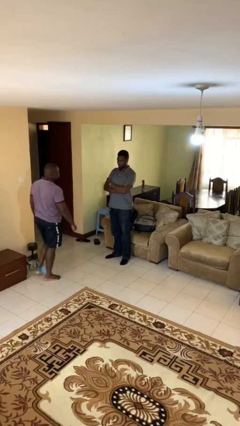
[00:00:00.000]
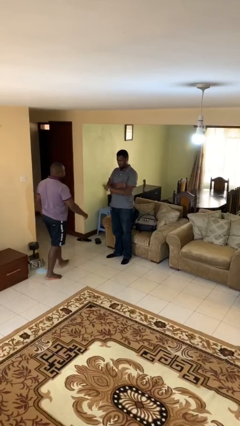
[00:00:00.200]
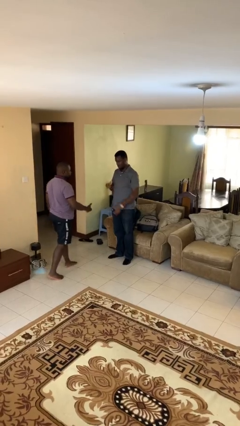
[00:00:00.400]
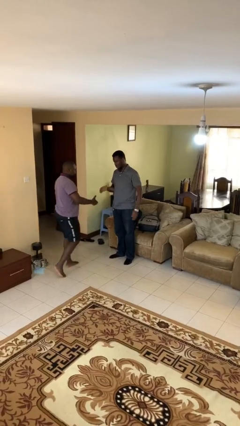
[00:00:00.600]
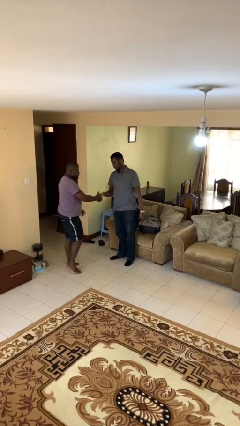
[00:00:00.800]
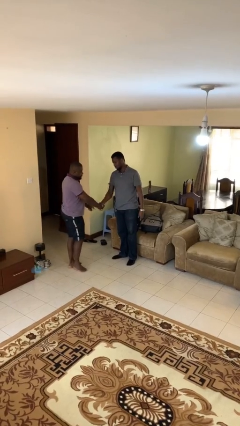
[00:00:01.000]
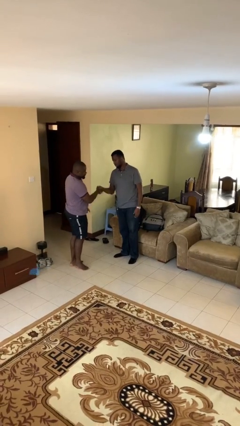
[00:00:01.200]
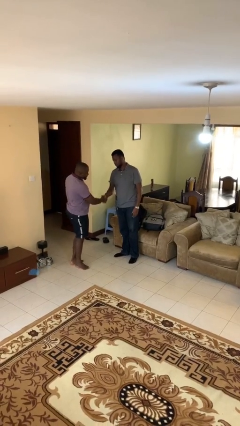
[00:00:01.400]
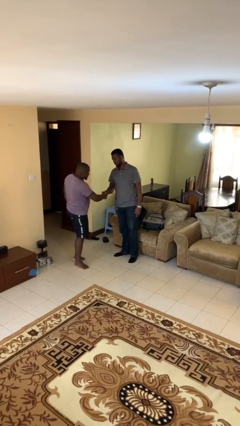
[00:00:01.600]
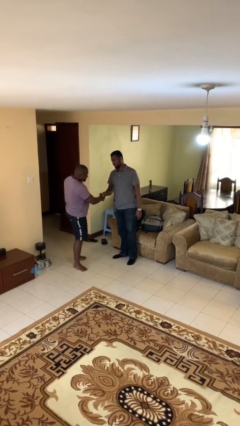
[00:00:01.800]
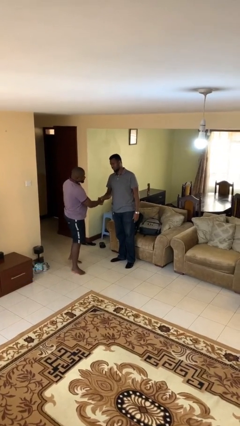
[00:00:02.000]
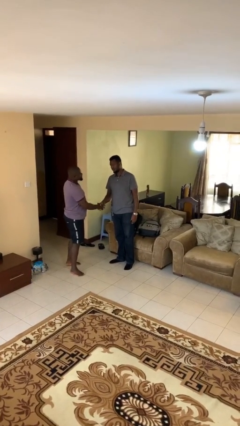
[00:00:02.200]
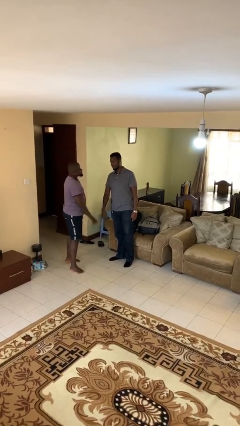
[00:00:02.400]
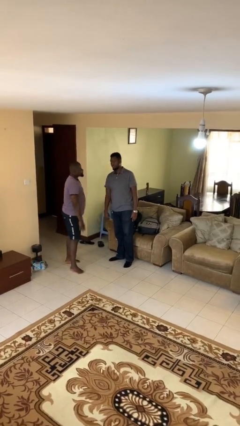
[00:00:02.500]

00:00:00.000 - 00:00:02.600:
person shakes hand

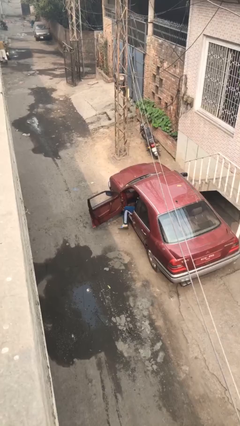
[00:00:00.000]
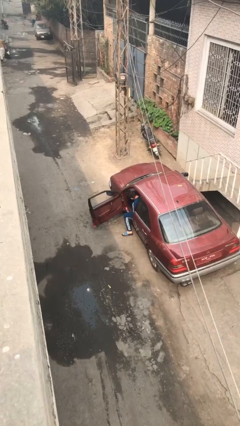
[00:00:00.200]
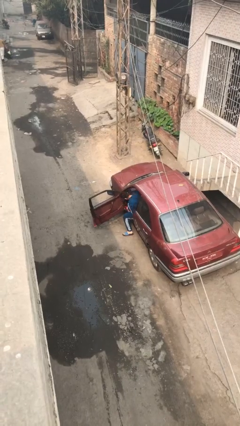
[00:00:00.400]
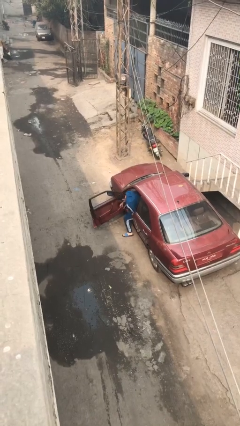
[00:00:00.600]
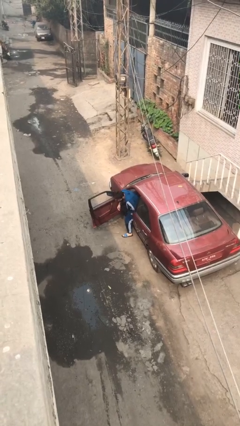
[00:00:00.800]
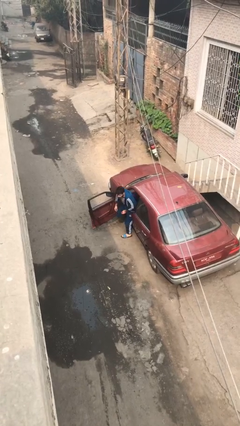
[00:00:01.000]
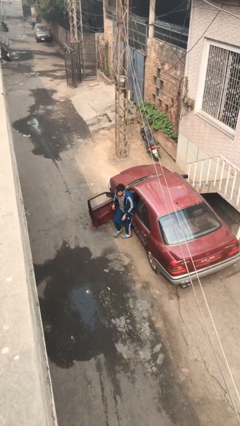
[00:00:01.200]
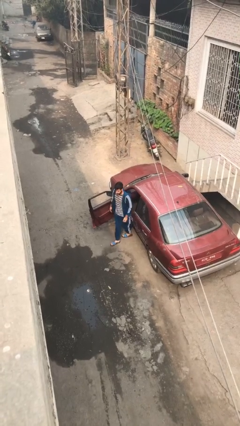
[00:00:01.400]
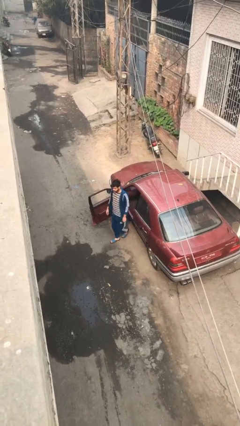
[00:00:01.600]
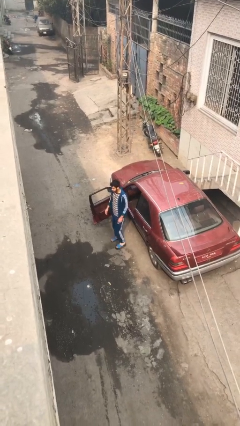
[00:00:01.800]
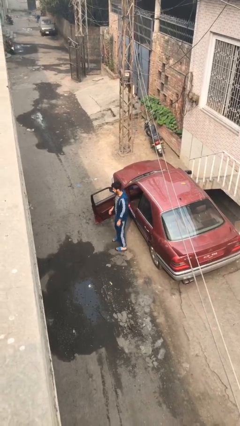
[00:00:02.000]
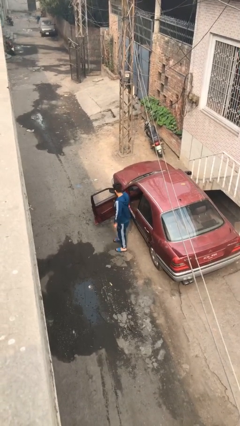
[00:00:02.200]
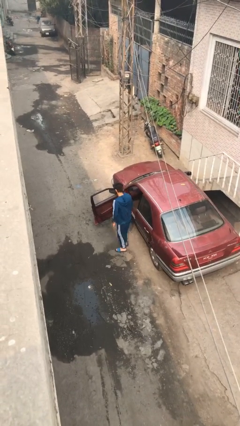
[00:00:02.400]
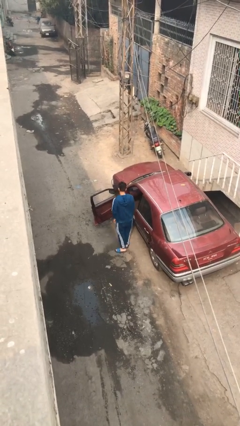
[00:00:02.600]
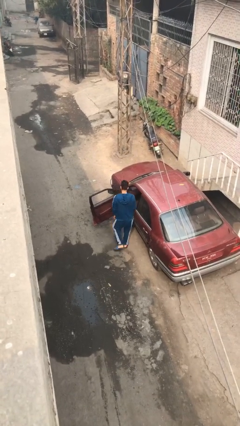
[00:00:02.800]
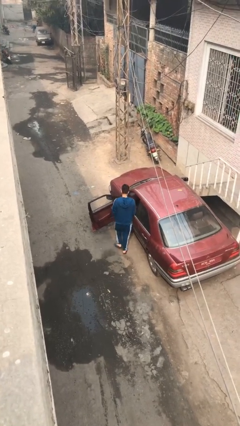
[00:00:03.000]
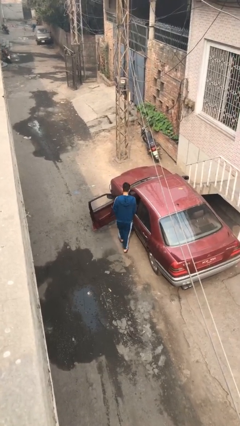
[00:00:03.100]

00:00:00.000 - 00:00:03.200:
person exits car

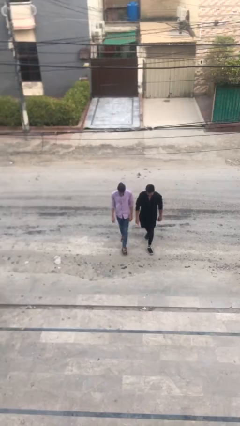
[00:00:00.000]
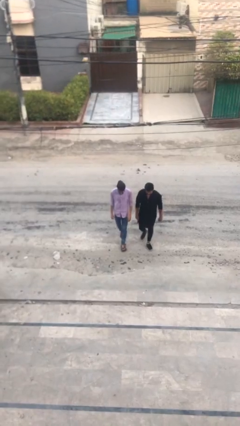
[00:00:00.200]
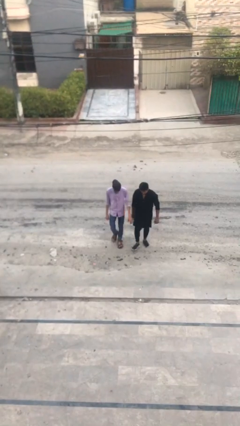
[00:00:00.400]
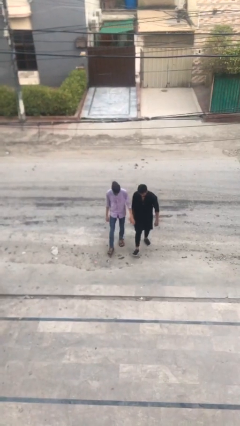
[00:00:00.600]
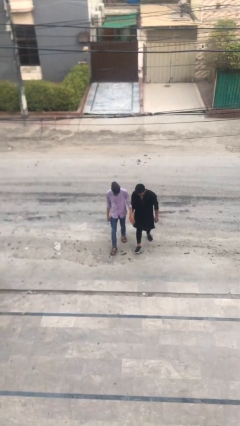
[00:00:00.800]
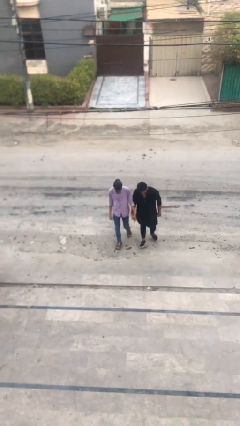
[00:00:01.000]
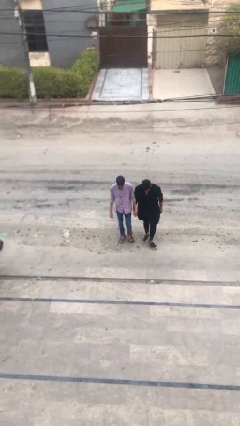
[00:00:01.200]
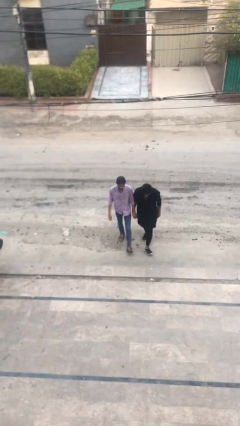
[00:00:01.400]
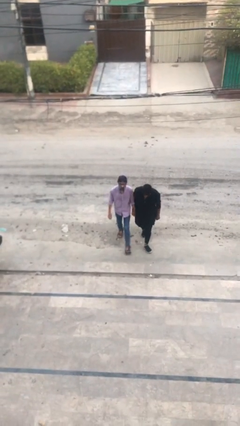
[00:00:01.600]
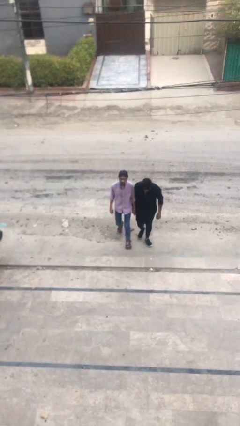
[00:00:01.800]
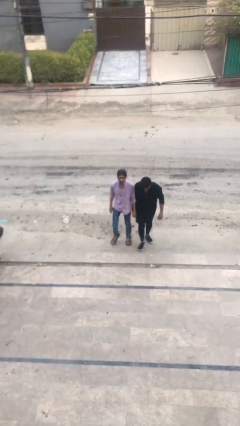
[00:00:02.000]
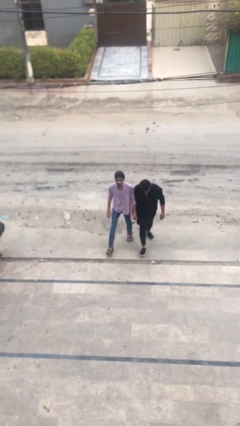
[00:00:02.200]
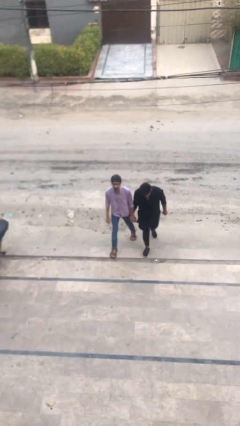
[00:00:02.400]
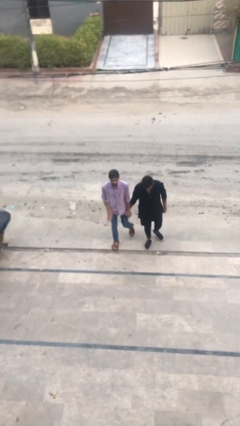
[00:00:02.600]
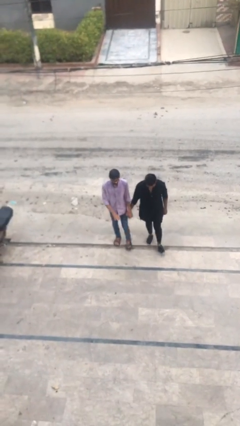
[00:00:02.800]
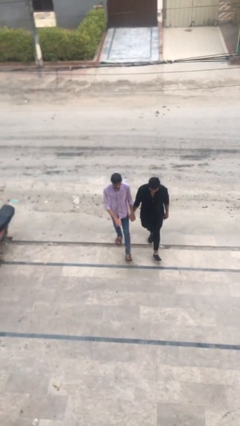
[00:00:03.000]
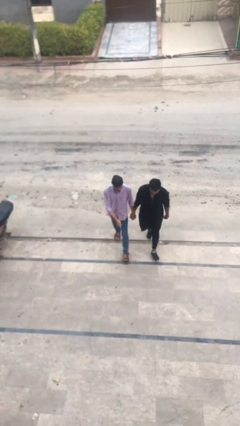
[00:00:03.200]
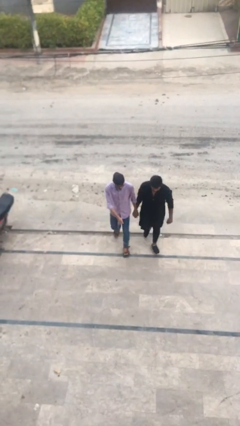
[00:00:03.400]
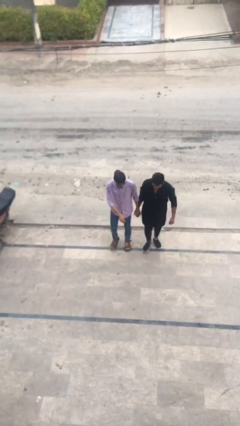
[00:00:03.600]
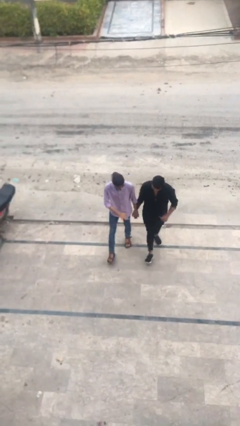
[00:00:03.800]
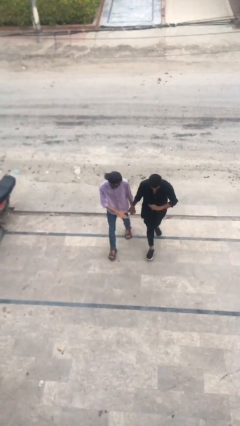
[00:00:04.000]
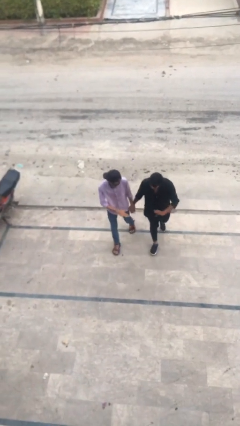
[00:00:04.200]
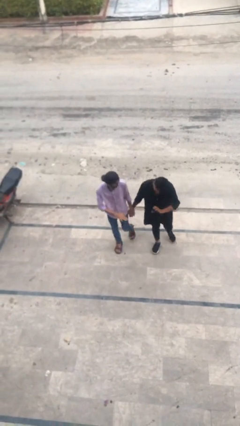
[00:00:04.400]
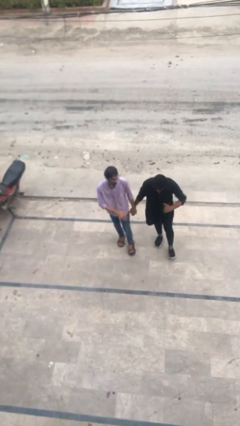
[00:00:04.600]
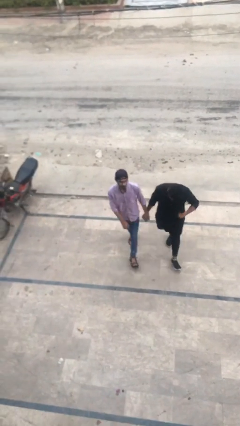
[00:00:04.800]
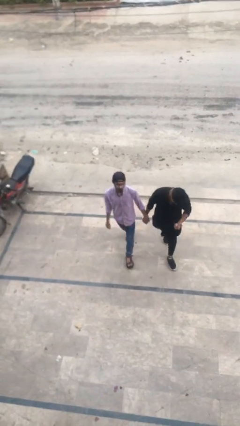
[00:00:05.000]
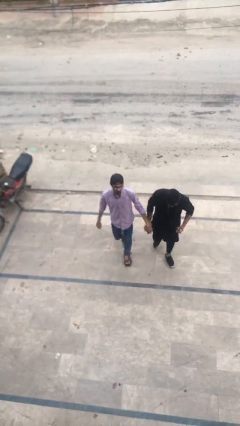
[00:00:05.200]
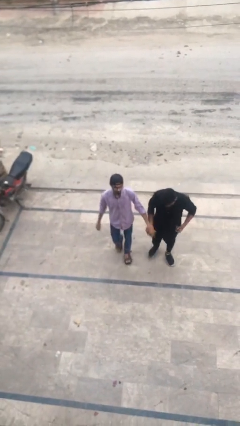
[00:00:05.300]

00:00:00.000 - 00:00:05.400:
person holds hand

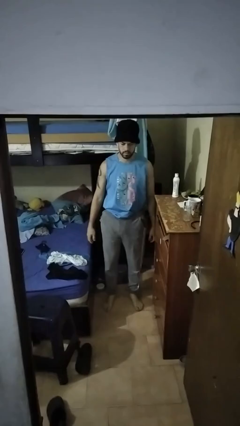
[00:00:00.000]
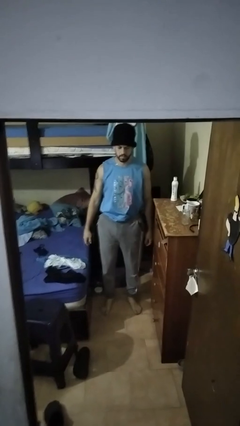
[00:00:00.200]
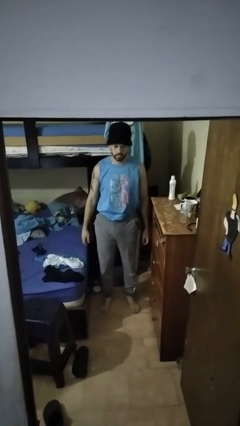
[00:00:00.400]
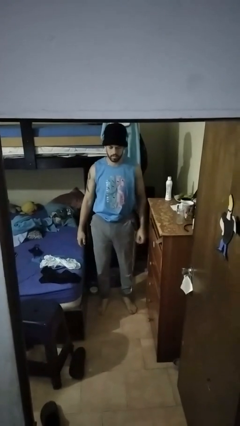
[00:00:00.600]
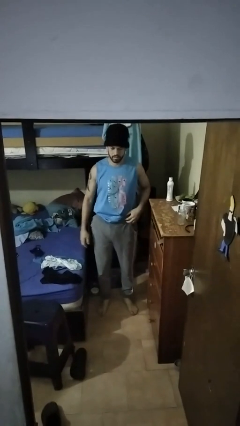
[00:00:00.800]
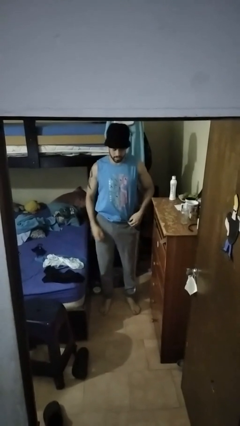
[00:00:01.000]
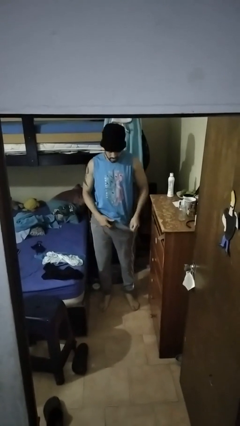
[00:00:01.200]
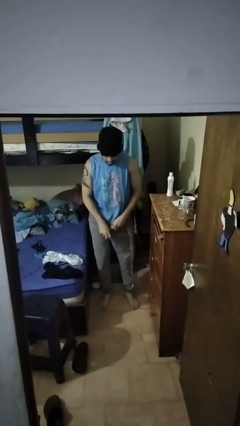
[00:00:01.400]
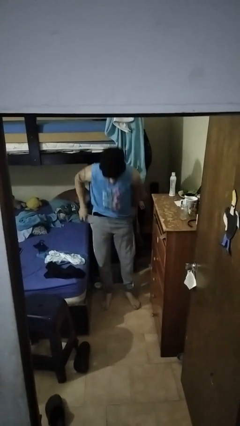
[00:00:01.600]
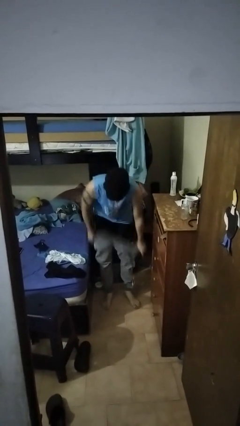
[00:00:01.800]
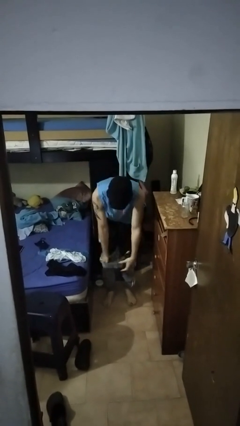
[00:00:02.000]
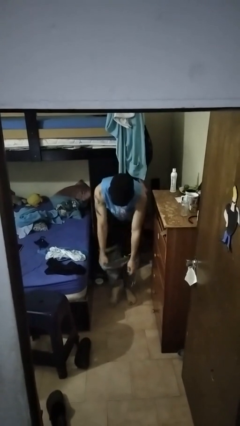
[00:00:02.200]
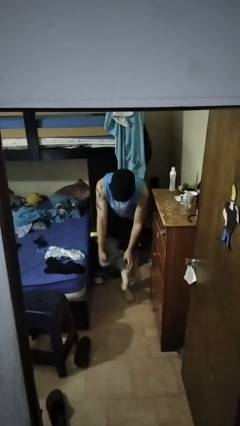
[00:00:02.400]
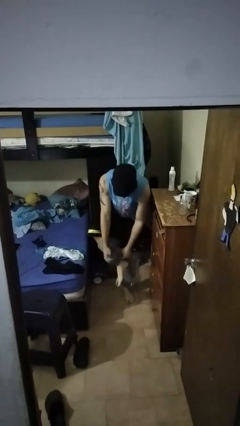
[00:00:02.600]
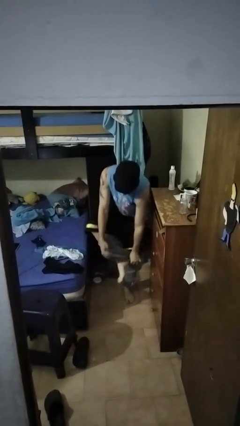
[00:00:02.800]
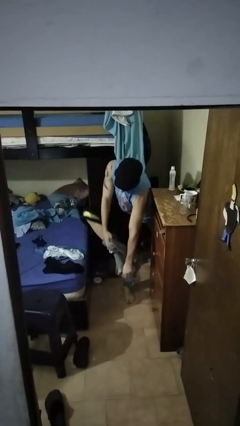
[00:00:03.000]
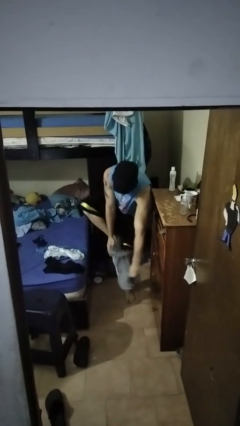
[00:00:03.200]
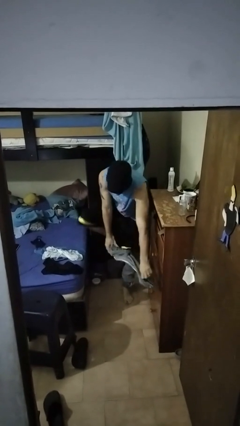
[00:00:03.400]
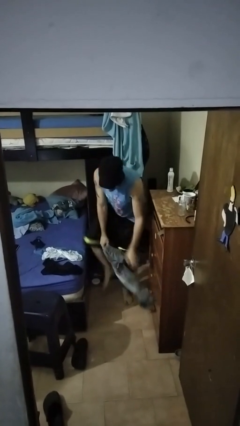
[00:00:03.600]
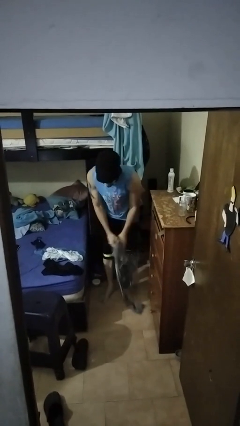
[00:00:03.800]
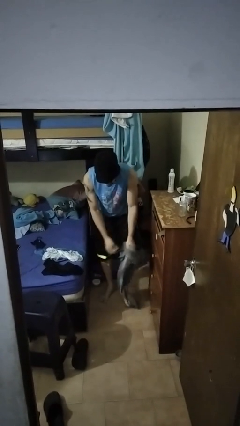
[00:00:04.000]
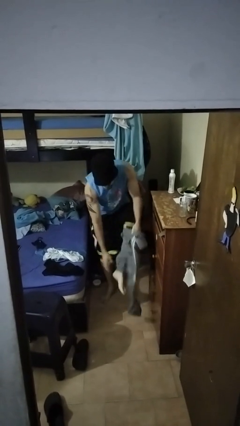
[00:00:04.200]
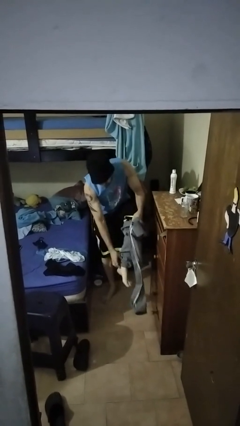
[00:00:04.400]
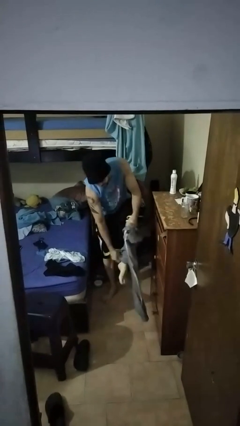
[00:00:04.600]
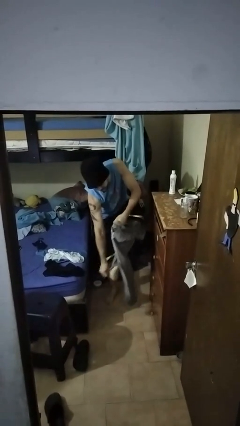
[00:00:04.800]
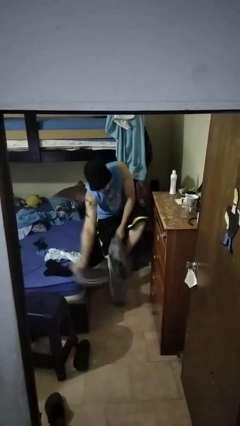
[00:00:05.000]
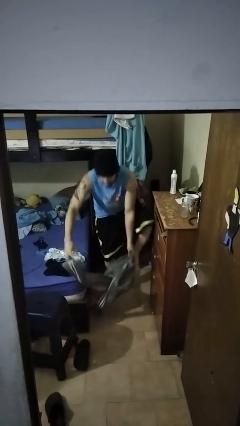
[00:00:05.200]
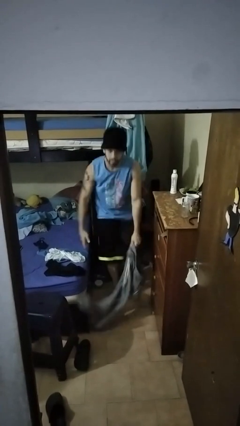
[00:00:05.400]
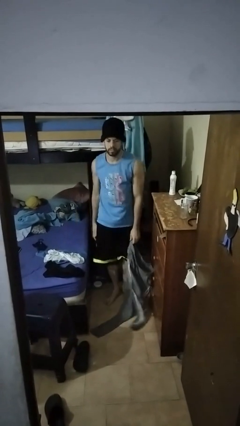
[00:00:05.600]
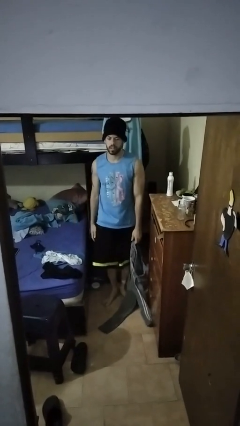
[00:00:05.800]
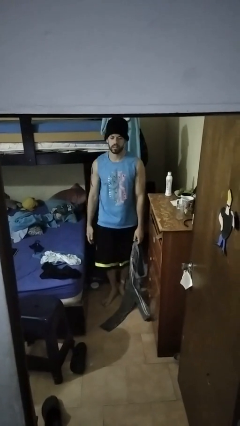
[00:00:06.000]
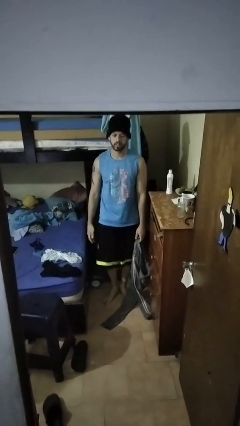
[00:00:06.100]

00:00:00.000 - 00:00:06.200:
person takes off pants
